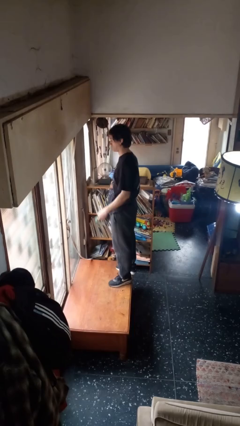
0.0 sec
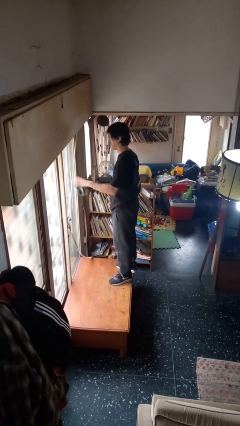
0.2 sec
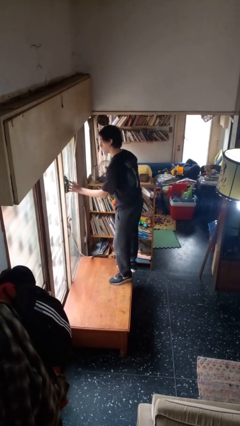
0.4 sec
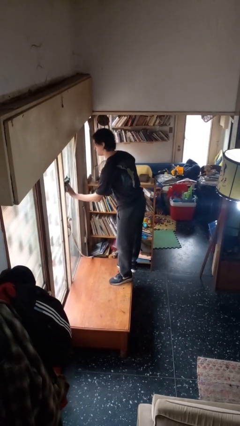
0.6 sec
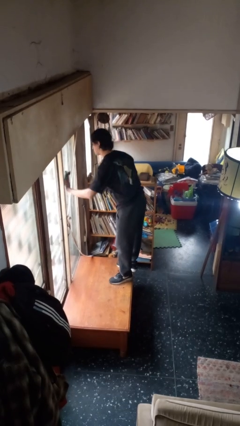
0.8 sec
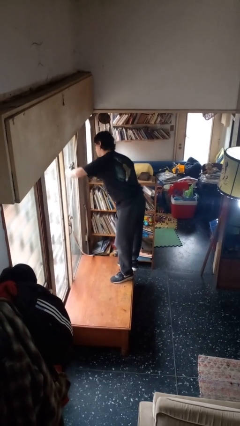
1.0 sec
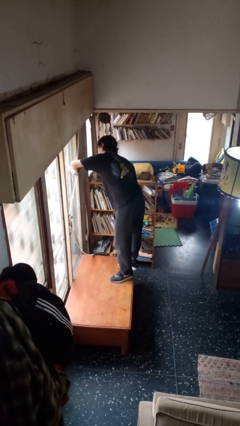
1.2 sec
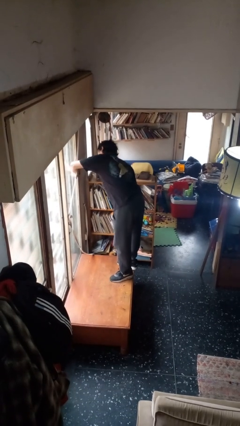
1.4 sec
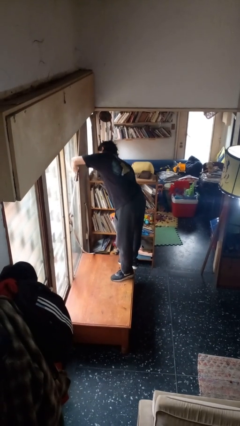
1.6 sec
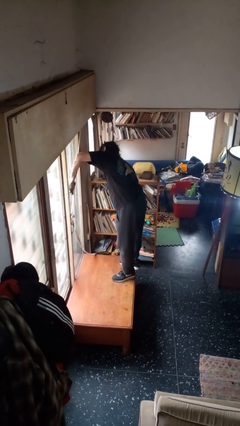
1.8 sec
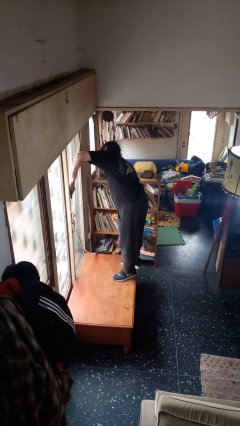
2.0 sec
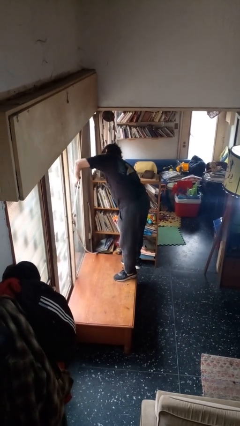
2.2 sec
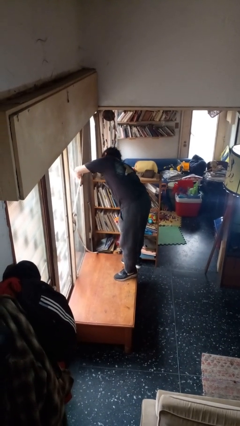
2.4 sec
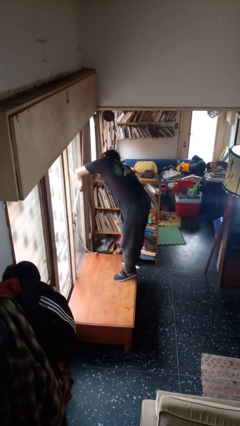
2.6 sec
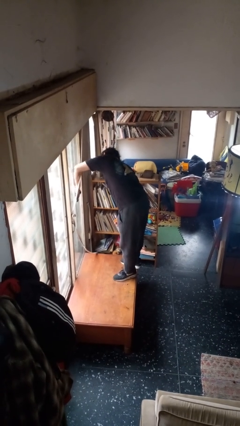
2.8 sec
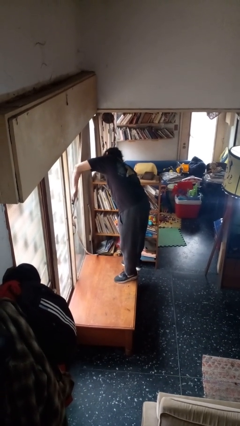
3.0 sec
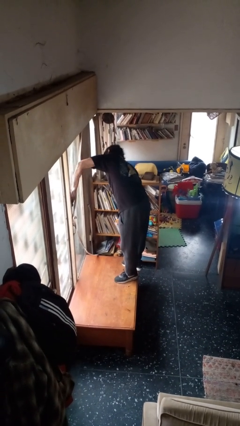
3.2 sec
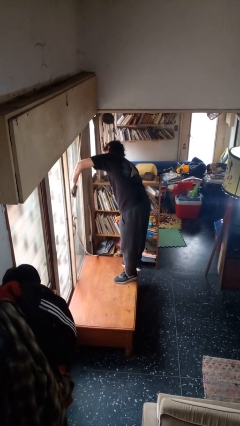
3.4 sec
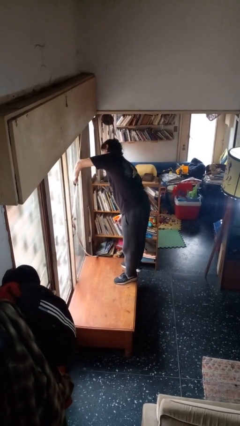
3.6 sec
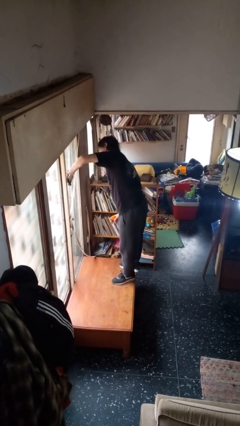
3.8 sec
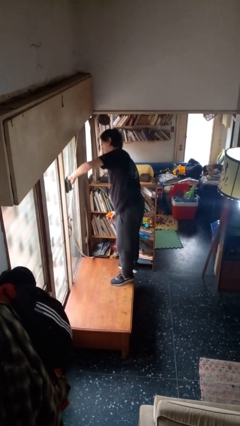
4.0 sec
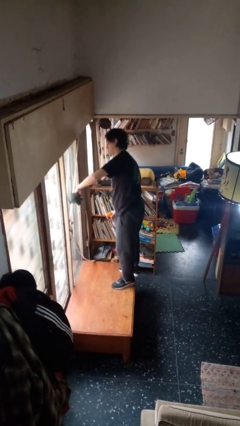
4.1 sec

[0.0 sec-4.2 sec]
person washes window

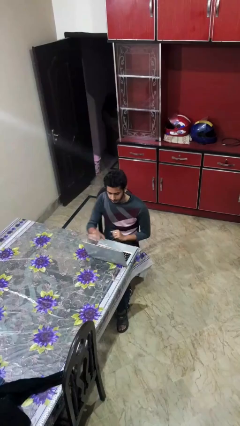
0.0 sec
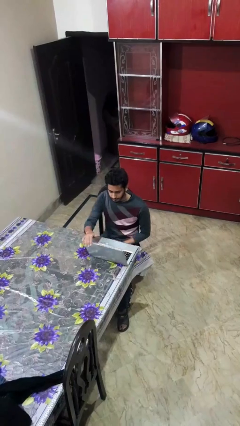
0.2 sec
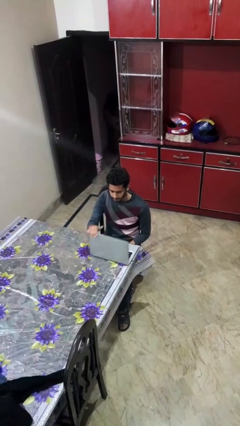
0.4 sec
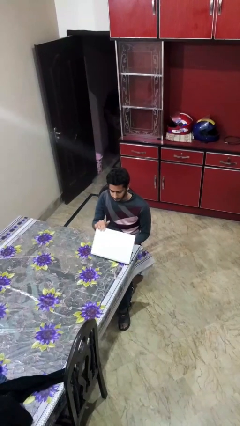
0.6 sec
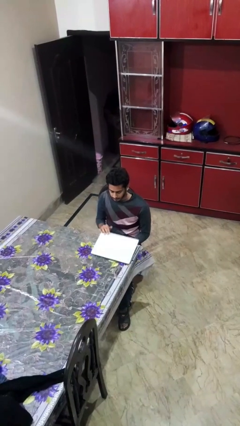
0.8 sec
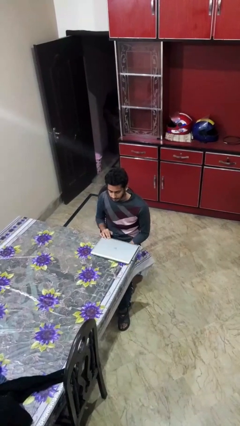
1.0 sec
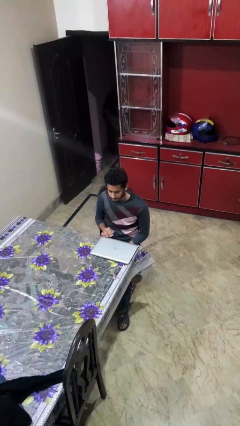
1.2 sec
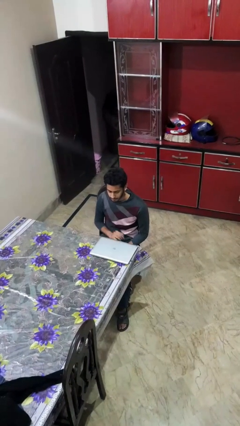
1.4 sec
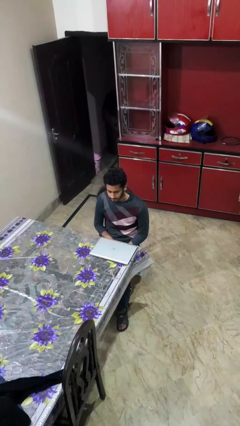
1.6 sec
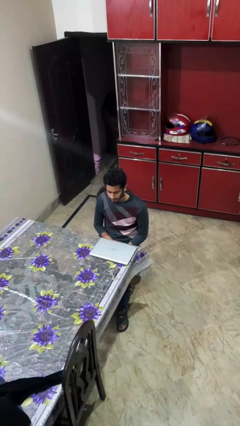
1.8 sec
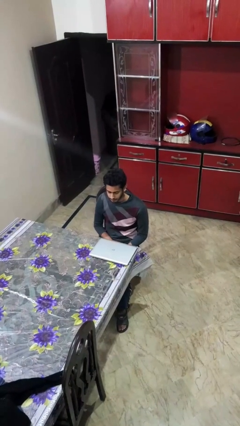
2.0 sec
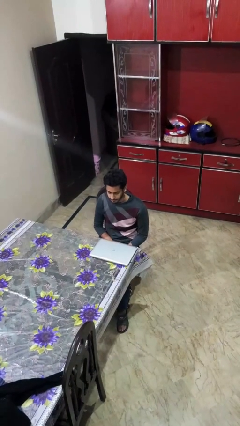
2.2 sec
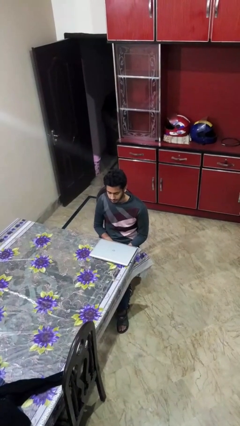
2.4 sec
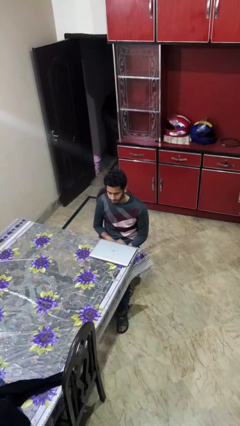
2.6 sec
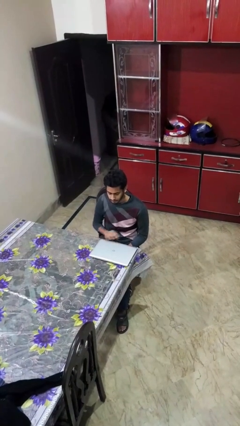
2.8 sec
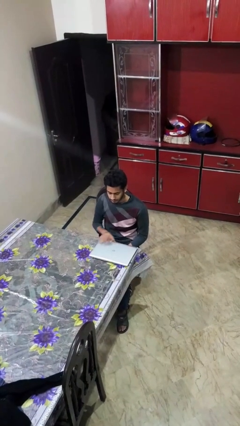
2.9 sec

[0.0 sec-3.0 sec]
person interacts with laptop

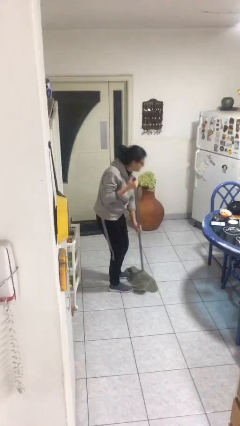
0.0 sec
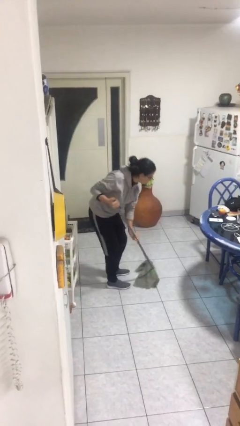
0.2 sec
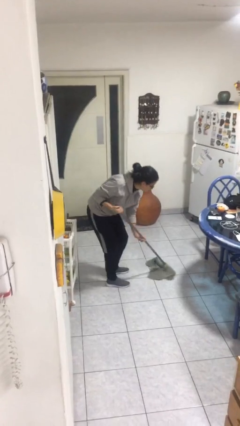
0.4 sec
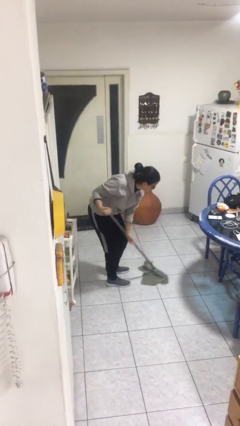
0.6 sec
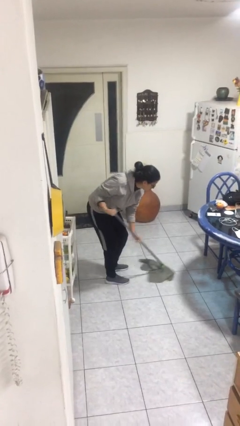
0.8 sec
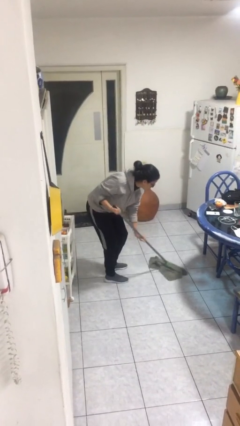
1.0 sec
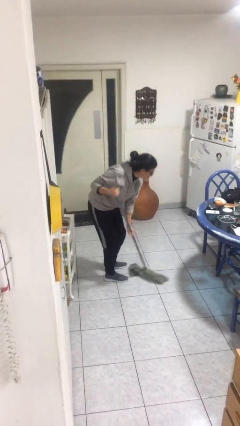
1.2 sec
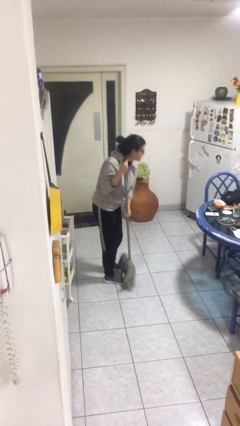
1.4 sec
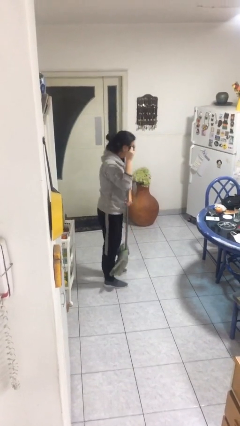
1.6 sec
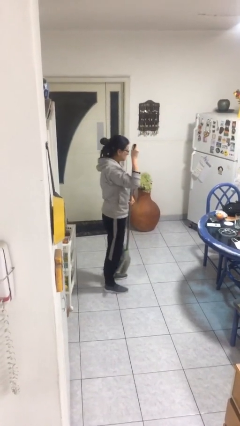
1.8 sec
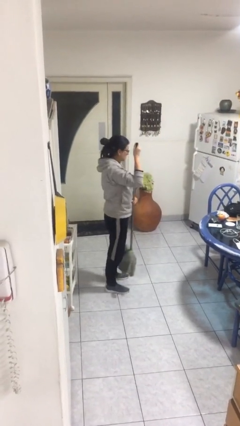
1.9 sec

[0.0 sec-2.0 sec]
person sweeps floor

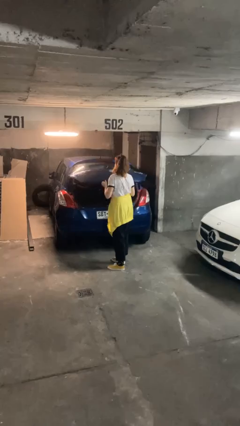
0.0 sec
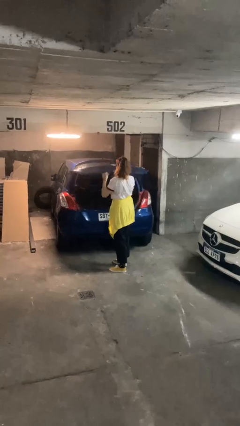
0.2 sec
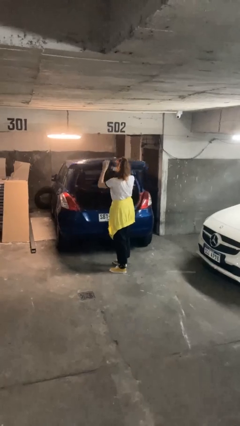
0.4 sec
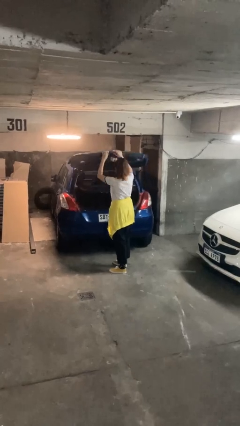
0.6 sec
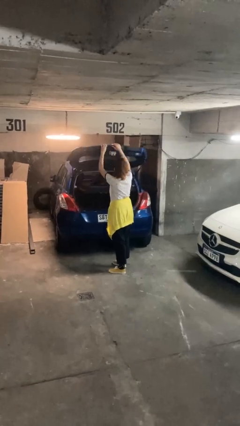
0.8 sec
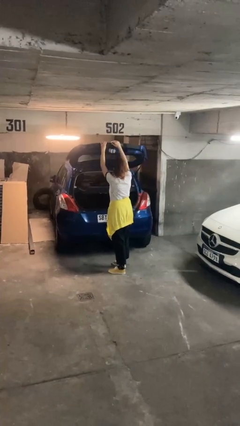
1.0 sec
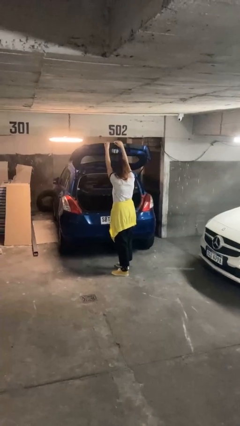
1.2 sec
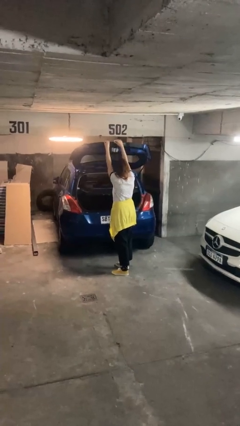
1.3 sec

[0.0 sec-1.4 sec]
person opens car trunk

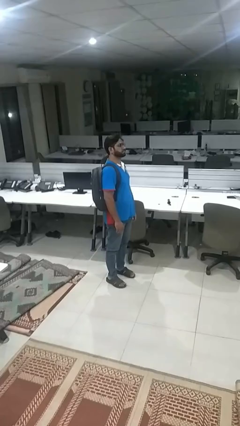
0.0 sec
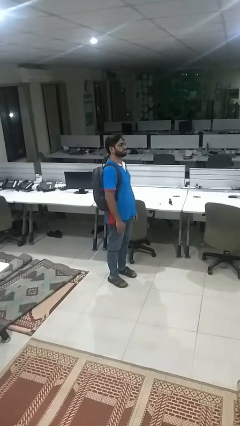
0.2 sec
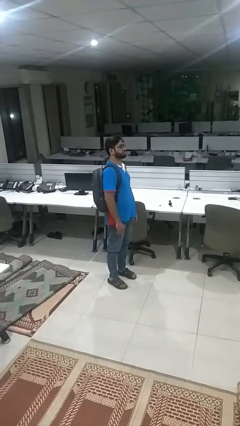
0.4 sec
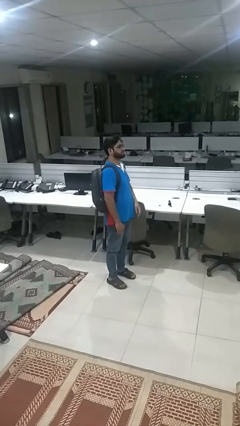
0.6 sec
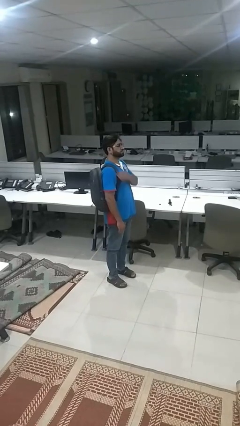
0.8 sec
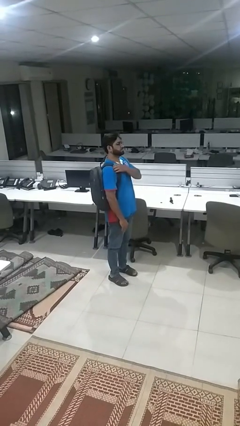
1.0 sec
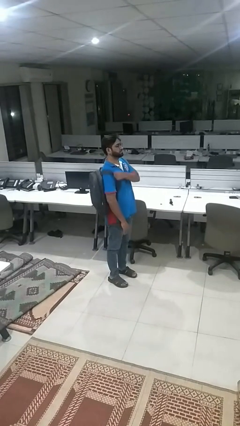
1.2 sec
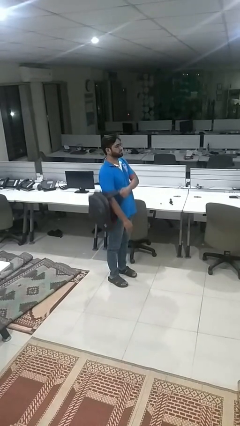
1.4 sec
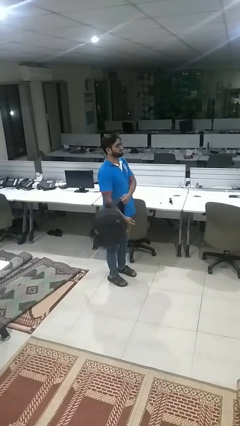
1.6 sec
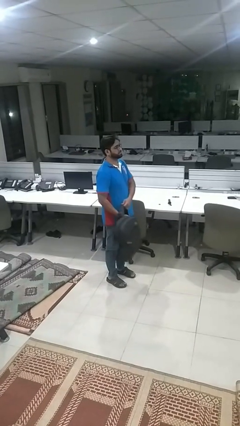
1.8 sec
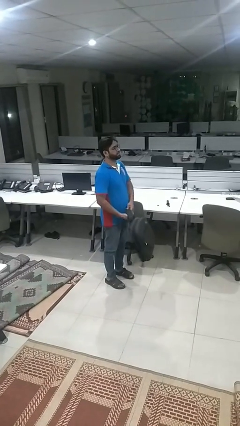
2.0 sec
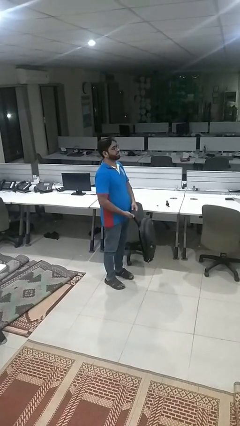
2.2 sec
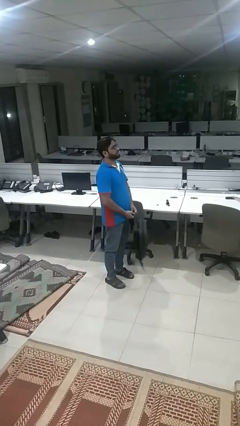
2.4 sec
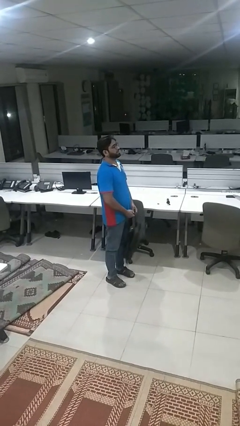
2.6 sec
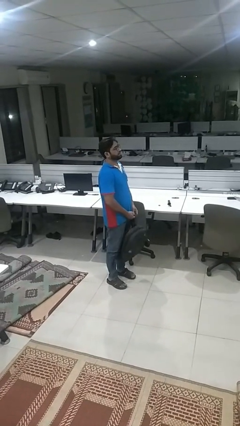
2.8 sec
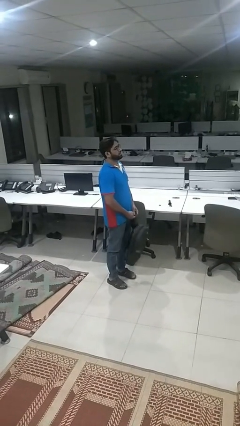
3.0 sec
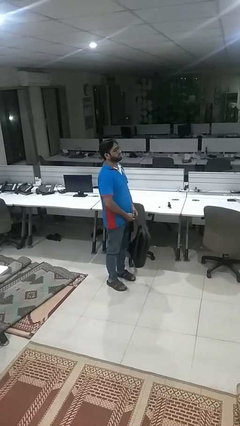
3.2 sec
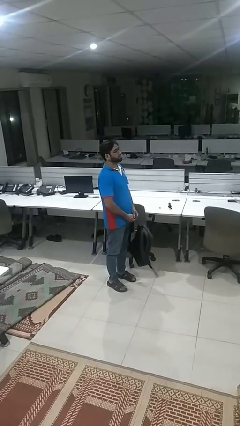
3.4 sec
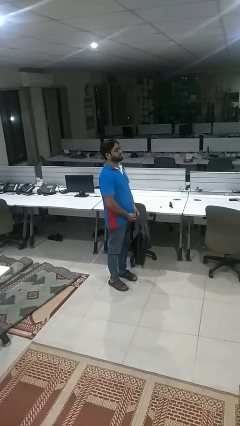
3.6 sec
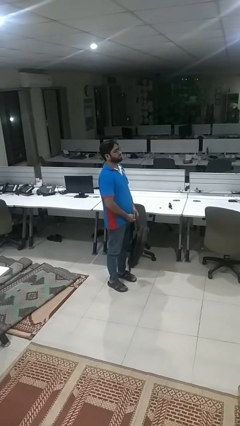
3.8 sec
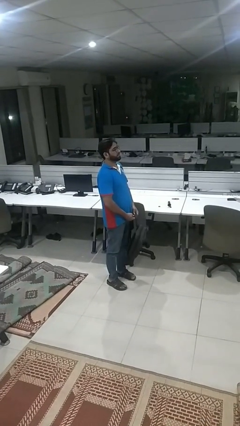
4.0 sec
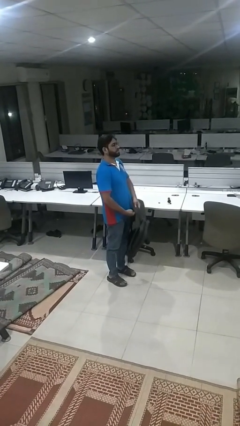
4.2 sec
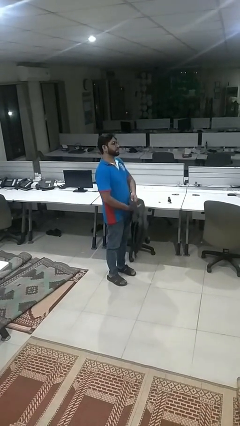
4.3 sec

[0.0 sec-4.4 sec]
person takes off backpack

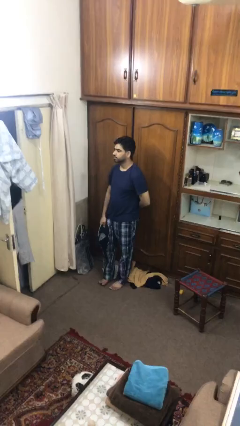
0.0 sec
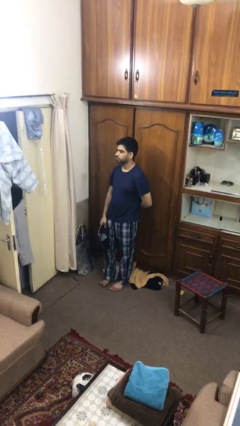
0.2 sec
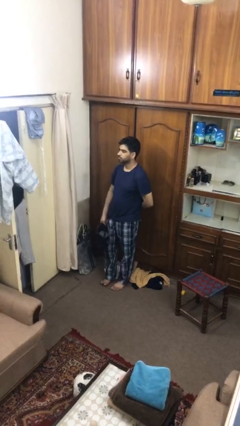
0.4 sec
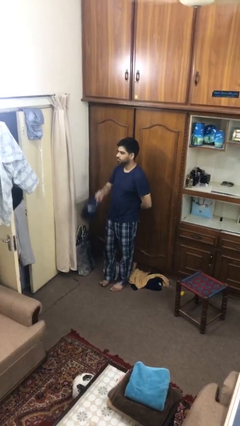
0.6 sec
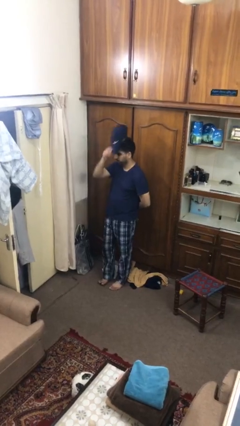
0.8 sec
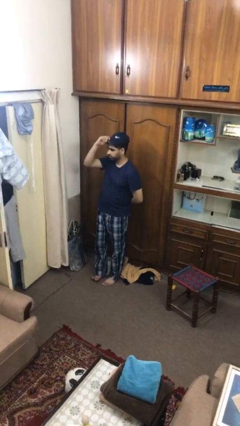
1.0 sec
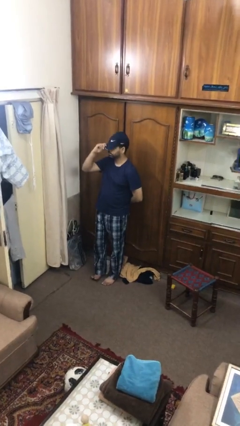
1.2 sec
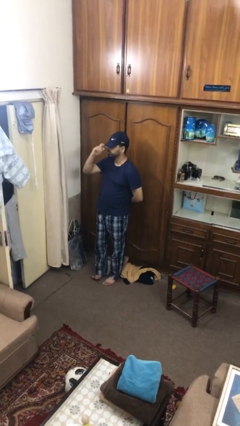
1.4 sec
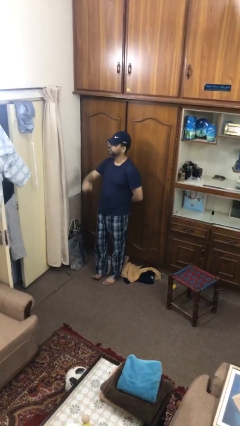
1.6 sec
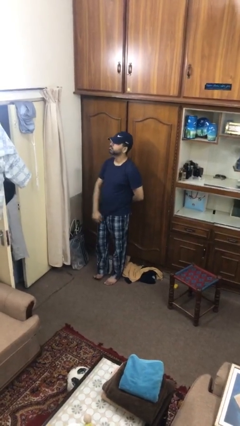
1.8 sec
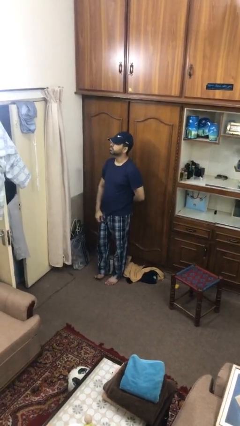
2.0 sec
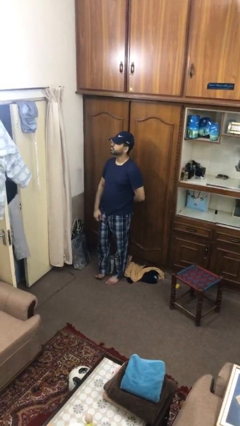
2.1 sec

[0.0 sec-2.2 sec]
person puts on hat

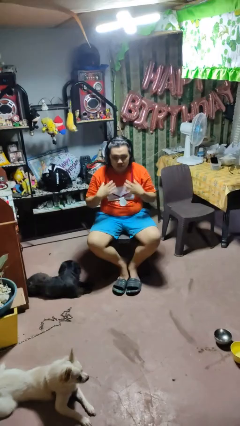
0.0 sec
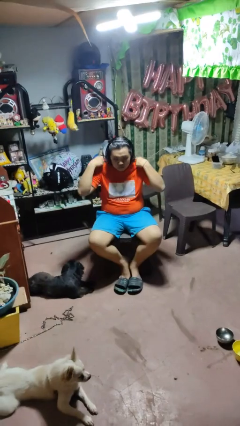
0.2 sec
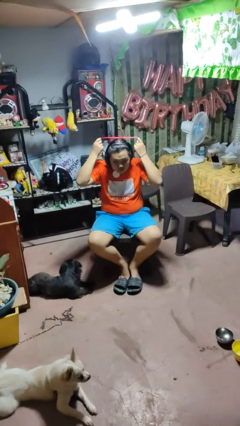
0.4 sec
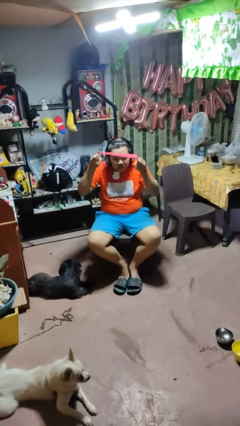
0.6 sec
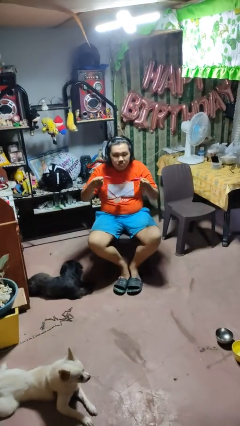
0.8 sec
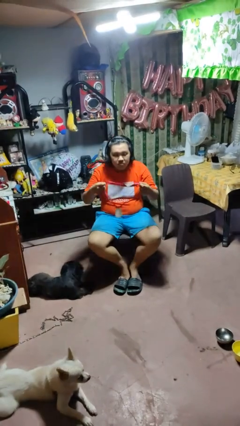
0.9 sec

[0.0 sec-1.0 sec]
person takes off necklace
